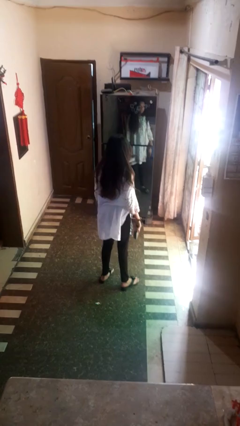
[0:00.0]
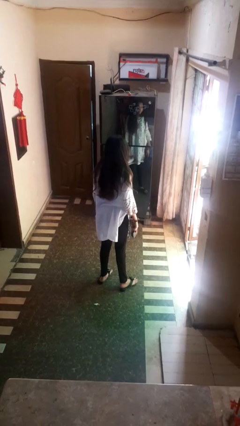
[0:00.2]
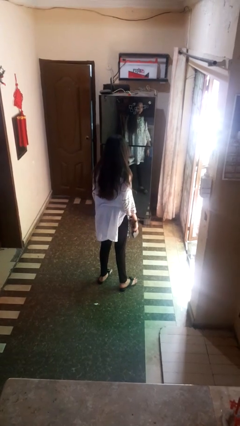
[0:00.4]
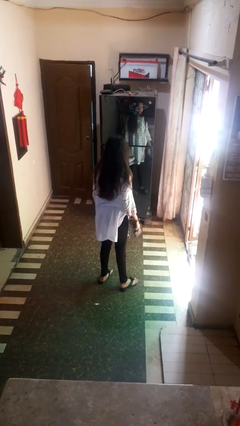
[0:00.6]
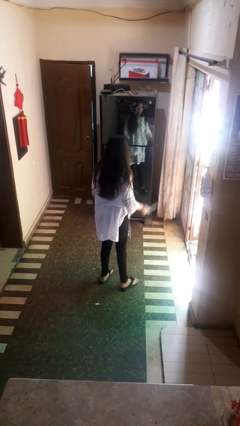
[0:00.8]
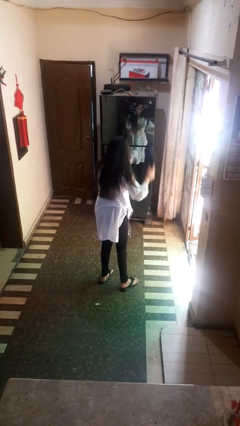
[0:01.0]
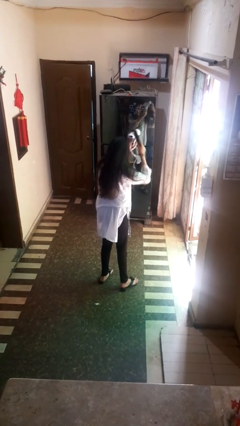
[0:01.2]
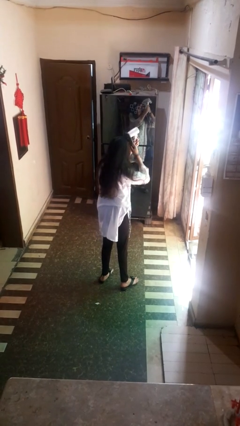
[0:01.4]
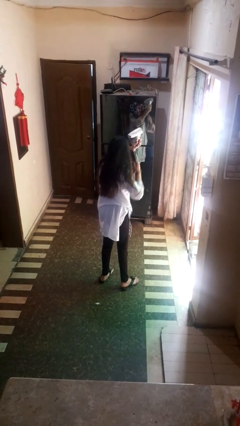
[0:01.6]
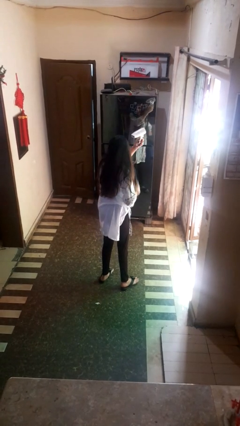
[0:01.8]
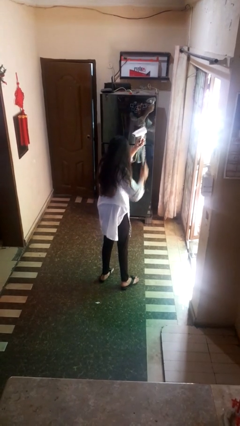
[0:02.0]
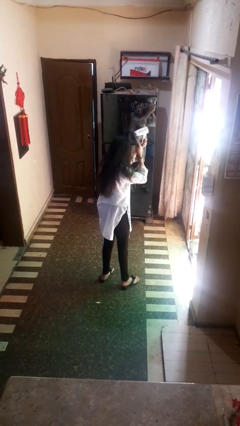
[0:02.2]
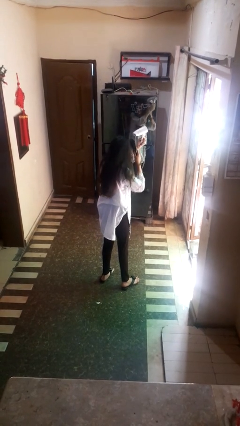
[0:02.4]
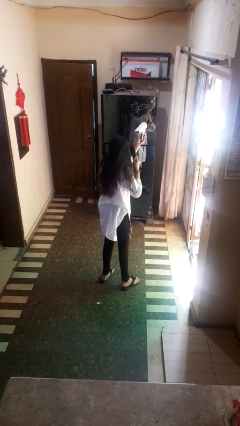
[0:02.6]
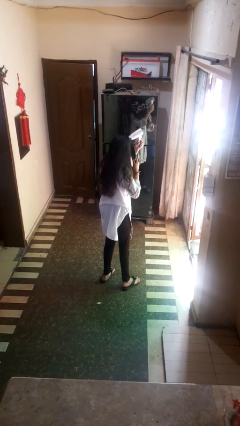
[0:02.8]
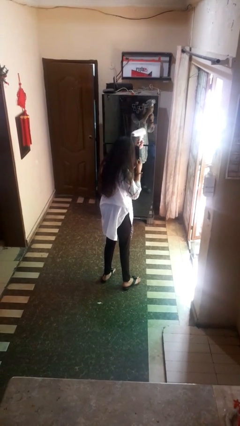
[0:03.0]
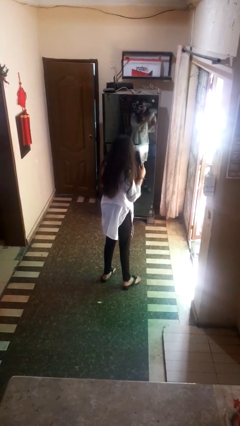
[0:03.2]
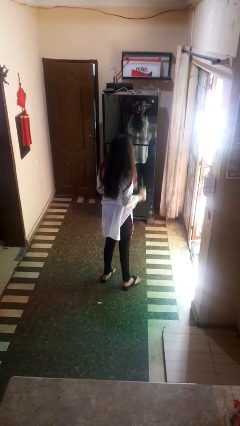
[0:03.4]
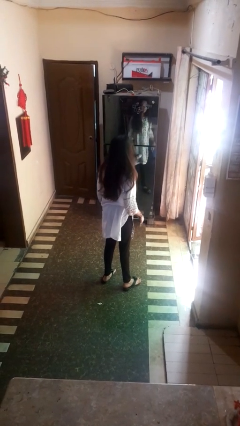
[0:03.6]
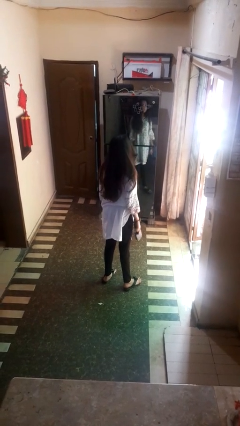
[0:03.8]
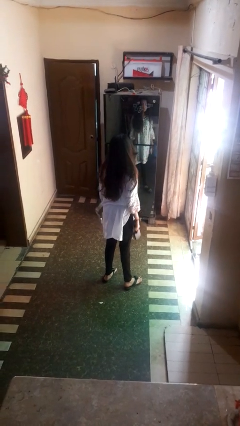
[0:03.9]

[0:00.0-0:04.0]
person dries hair with hairdryer

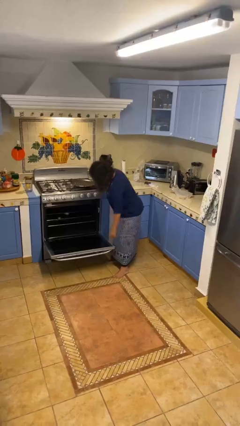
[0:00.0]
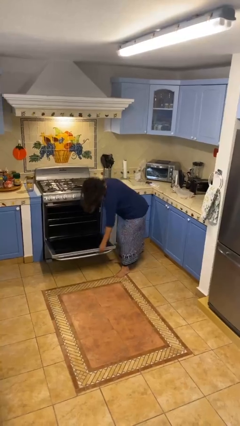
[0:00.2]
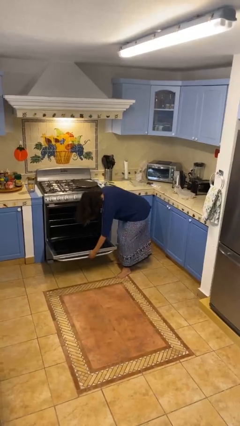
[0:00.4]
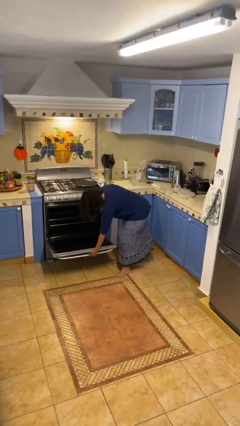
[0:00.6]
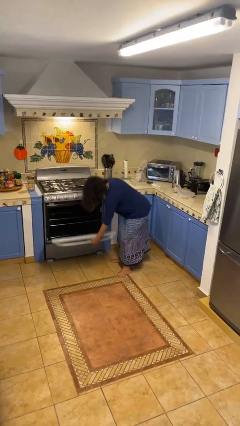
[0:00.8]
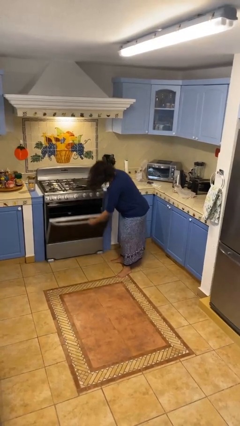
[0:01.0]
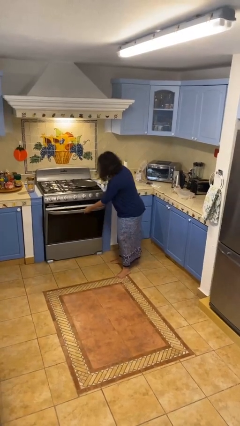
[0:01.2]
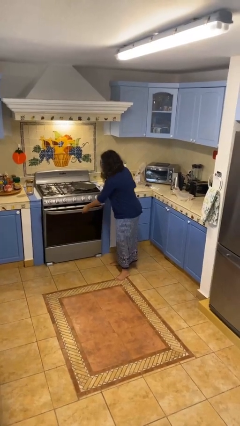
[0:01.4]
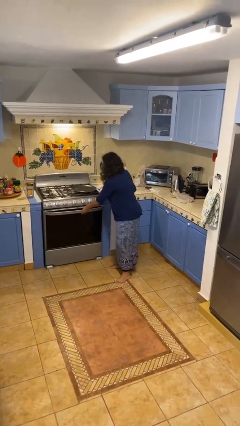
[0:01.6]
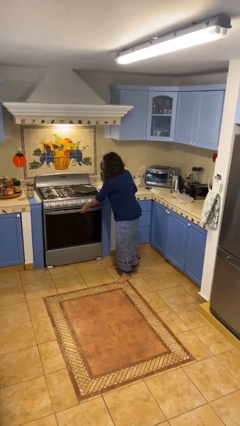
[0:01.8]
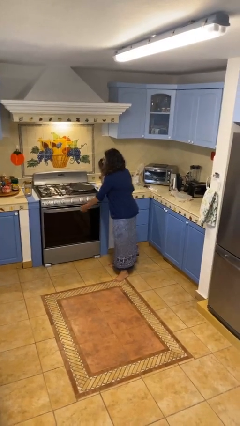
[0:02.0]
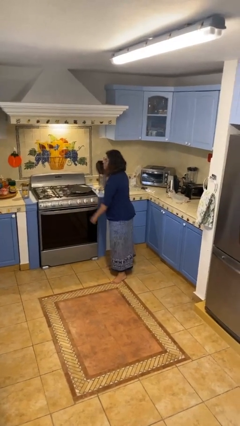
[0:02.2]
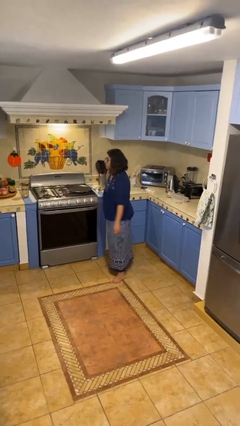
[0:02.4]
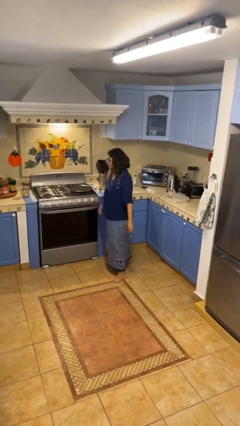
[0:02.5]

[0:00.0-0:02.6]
person closes oven door

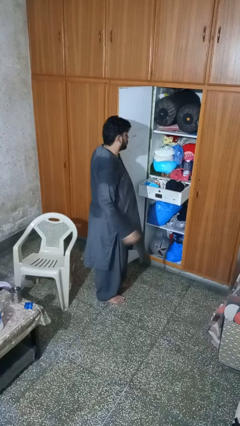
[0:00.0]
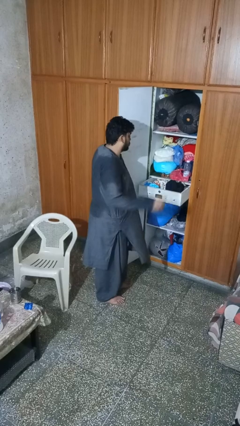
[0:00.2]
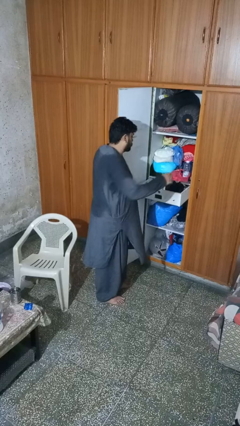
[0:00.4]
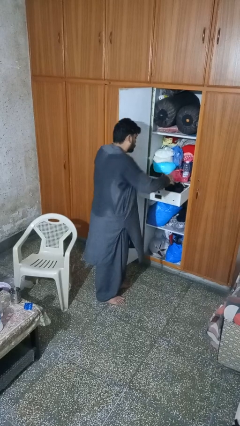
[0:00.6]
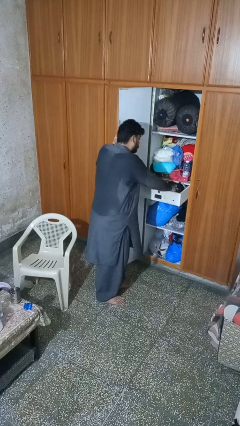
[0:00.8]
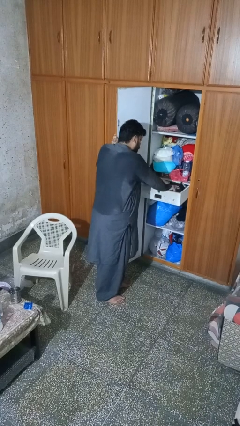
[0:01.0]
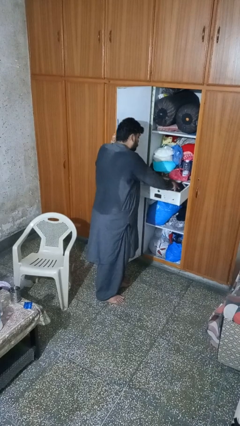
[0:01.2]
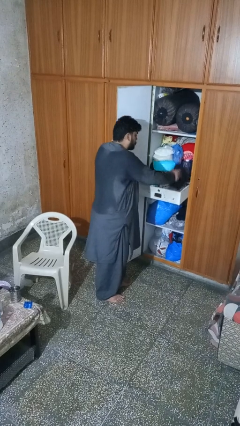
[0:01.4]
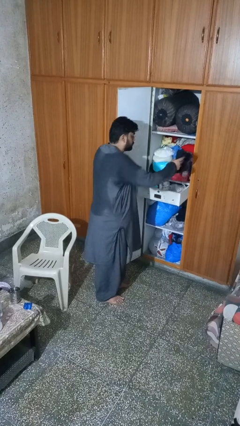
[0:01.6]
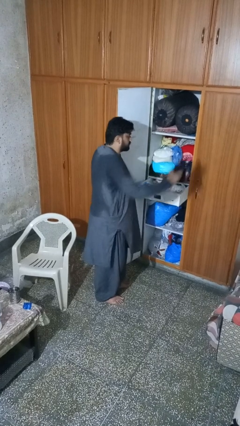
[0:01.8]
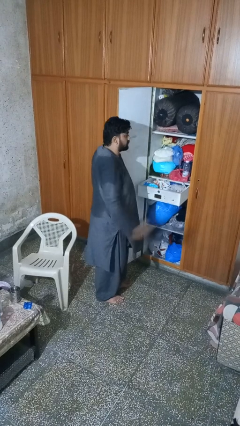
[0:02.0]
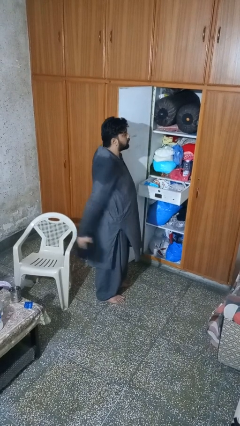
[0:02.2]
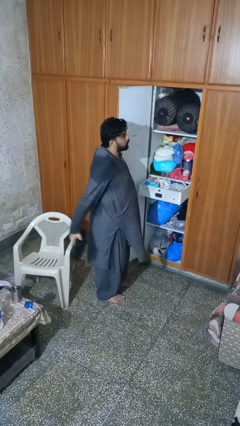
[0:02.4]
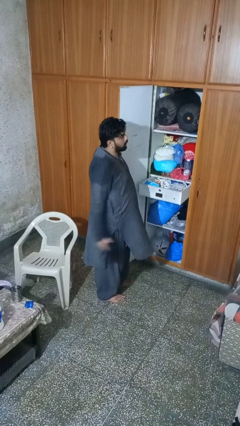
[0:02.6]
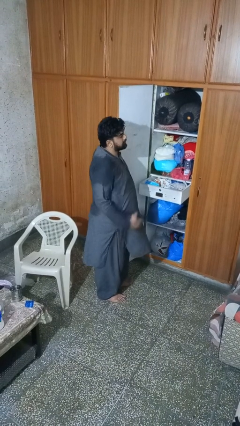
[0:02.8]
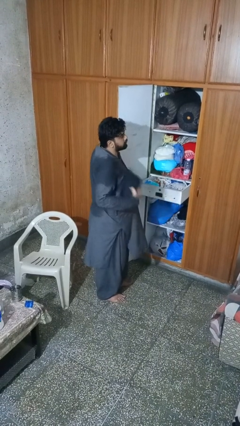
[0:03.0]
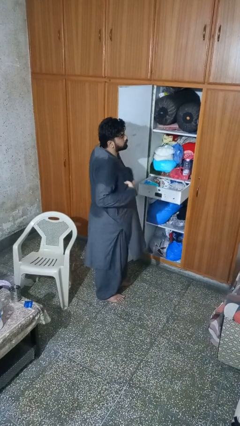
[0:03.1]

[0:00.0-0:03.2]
person takes clothes from dresser

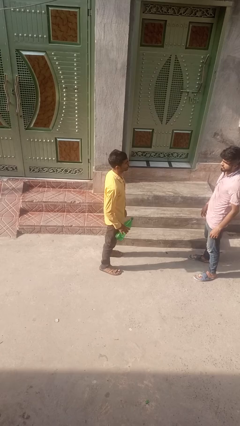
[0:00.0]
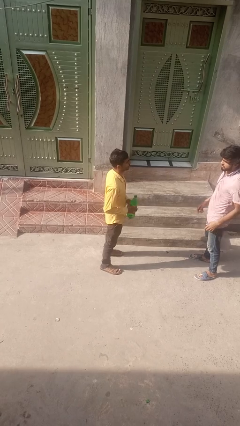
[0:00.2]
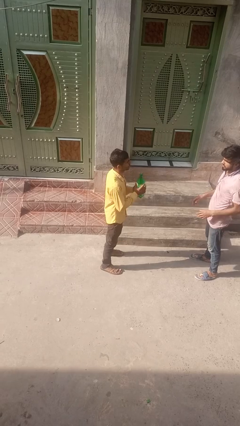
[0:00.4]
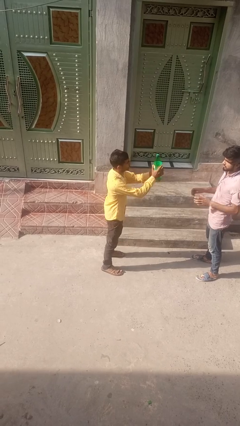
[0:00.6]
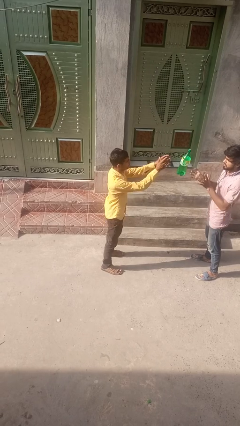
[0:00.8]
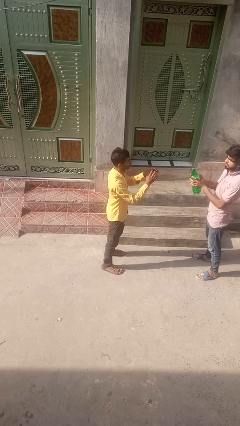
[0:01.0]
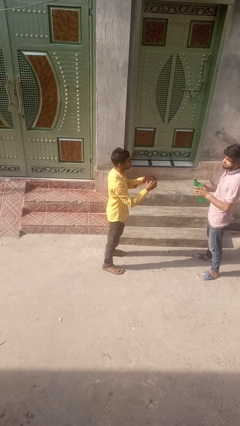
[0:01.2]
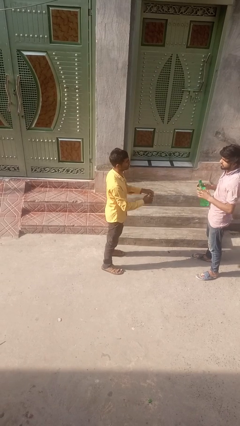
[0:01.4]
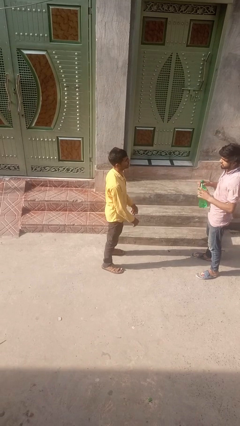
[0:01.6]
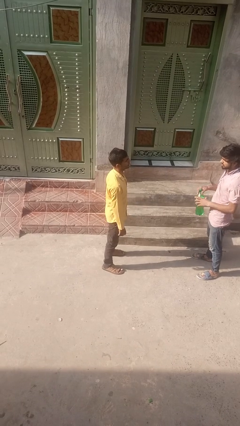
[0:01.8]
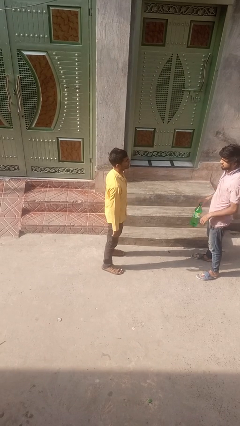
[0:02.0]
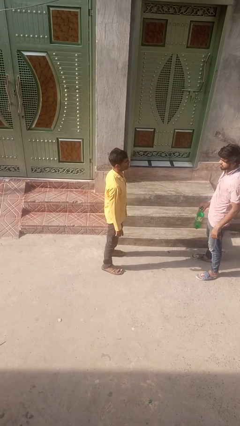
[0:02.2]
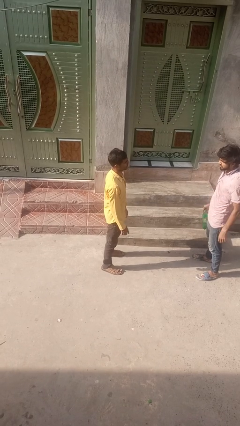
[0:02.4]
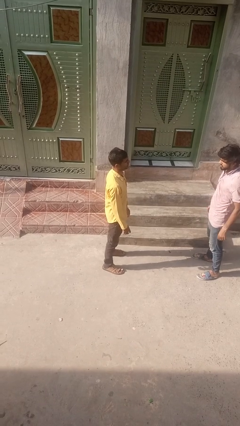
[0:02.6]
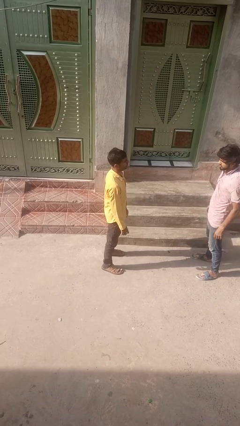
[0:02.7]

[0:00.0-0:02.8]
person throws object to person

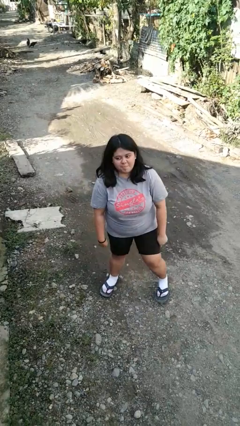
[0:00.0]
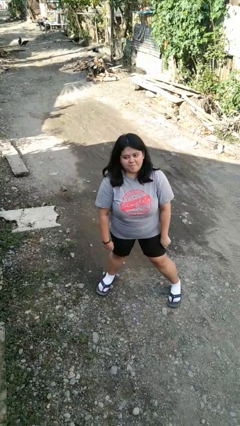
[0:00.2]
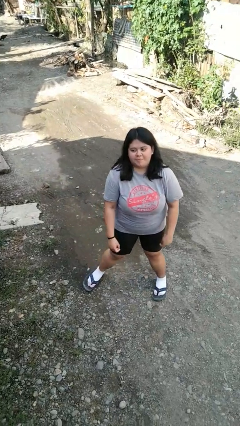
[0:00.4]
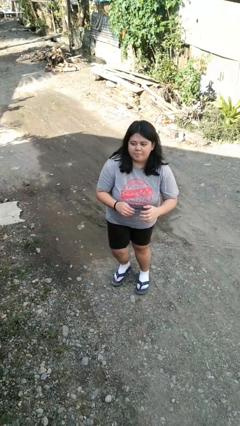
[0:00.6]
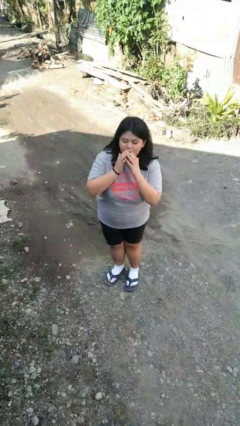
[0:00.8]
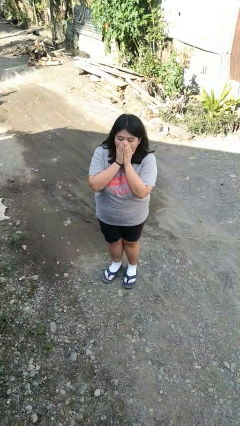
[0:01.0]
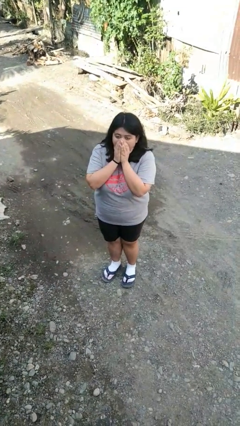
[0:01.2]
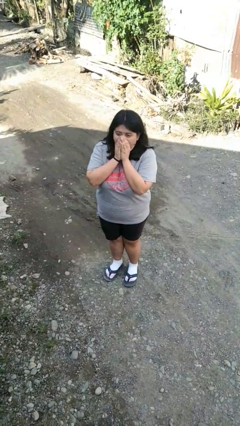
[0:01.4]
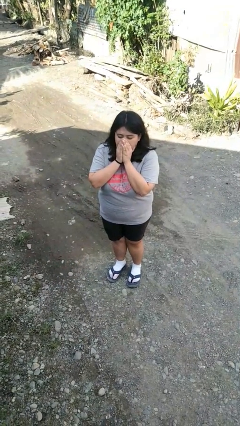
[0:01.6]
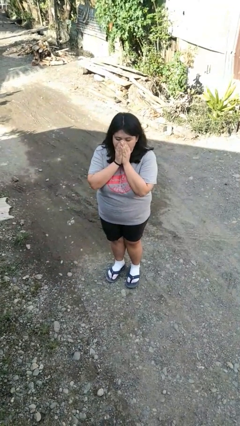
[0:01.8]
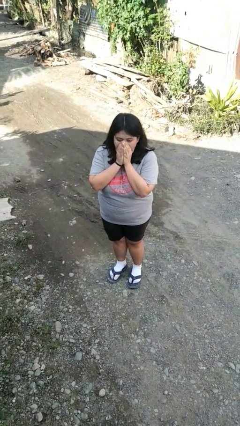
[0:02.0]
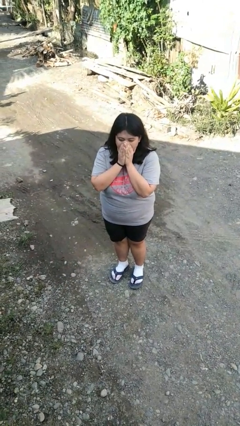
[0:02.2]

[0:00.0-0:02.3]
person blows into hands

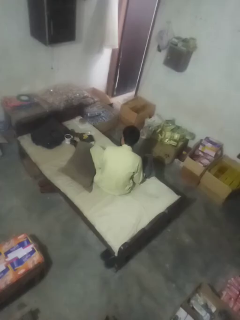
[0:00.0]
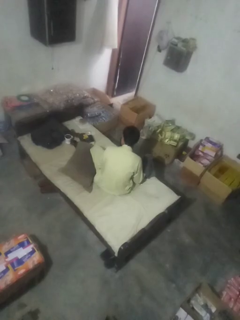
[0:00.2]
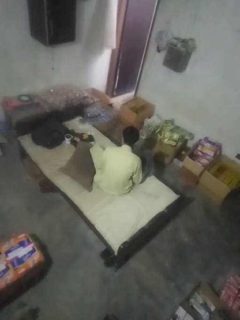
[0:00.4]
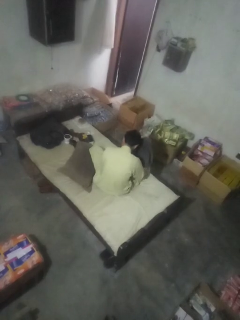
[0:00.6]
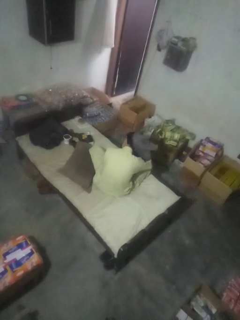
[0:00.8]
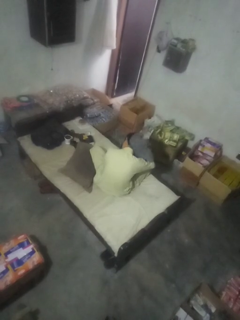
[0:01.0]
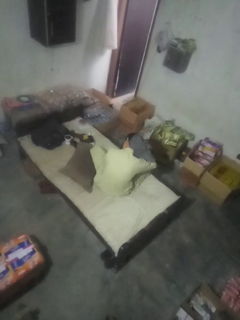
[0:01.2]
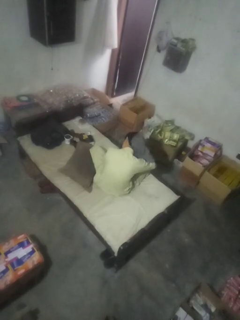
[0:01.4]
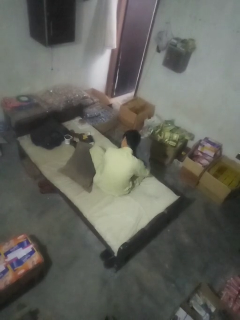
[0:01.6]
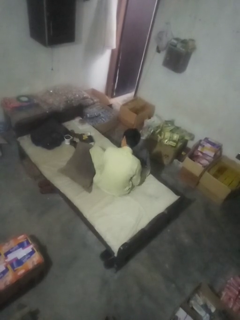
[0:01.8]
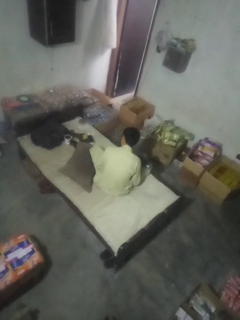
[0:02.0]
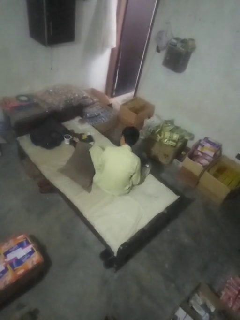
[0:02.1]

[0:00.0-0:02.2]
person dries hair with towel

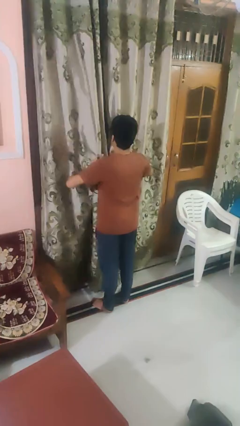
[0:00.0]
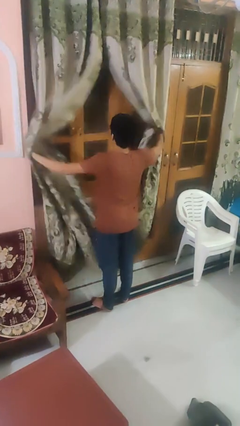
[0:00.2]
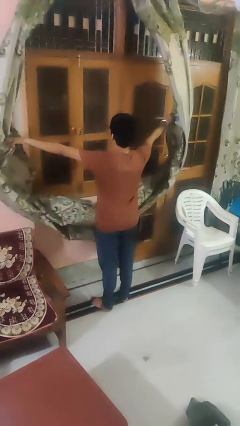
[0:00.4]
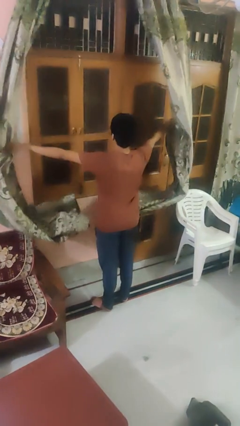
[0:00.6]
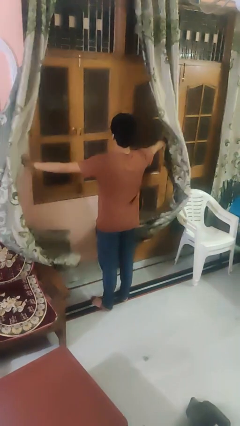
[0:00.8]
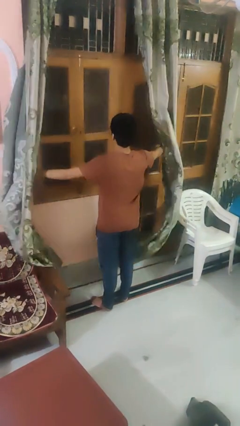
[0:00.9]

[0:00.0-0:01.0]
person opens curtains
